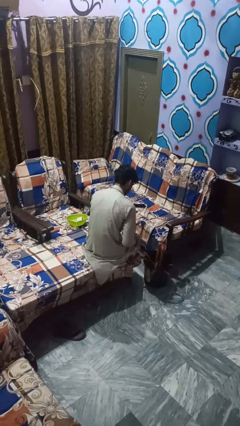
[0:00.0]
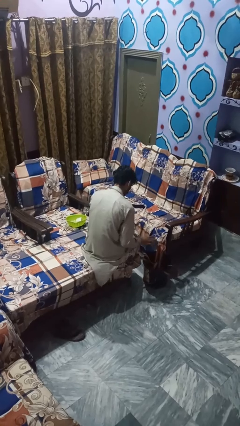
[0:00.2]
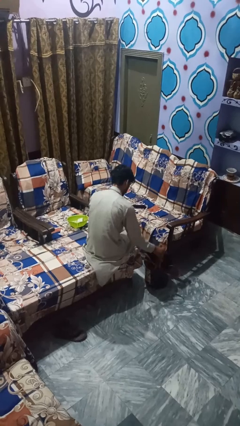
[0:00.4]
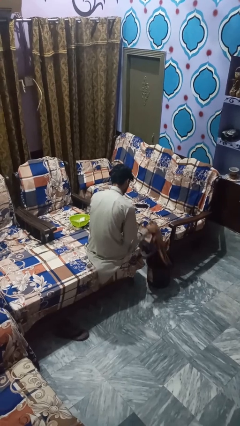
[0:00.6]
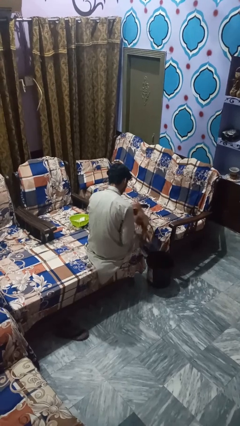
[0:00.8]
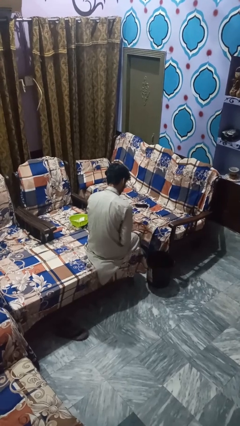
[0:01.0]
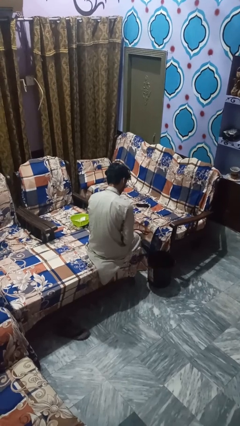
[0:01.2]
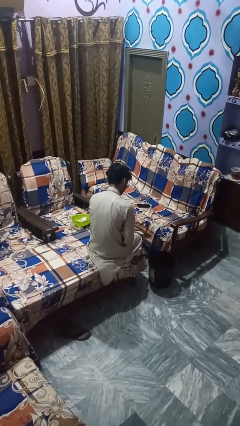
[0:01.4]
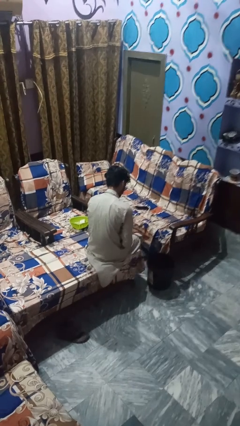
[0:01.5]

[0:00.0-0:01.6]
person takes object from basket

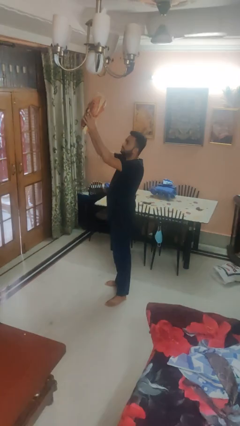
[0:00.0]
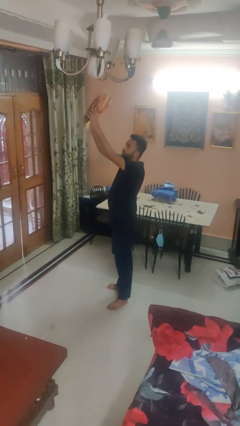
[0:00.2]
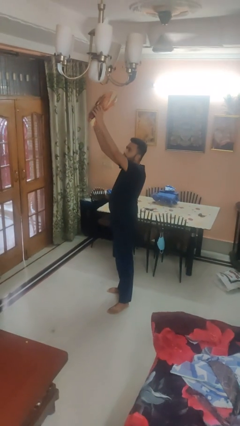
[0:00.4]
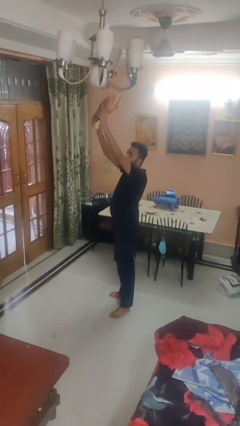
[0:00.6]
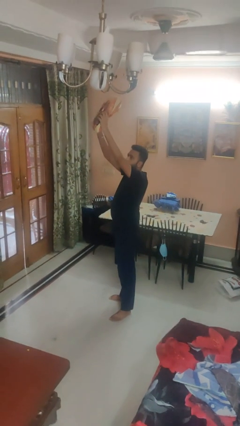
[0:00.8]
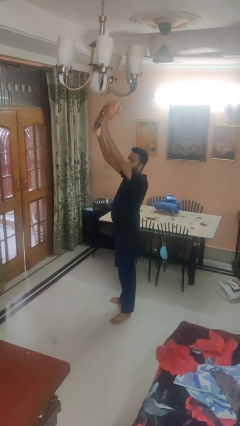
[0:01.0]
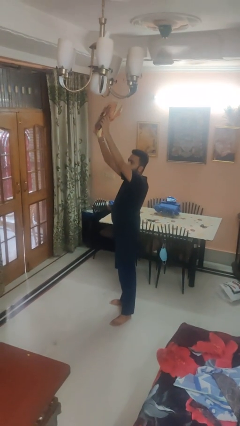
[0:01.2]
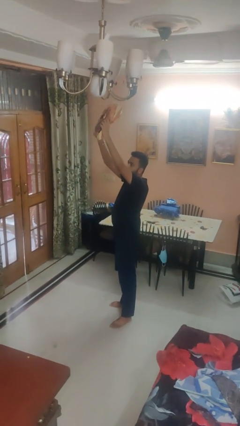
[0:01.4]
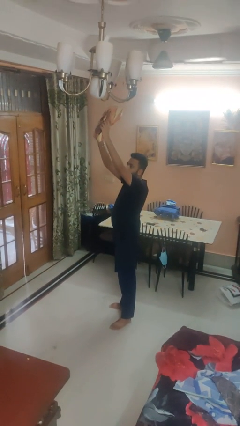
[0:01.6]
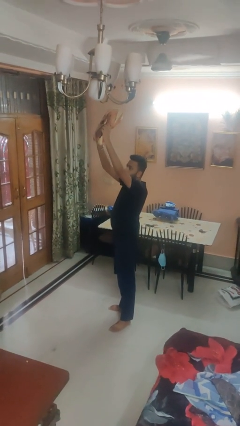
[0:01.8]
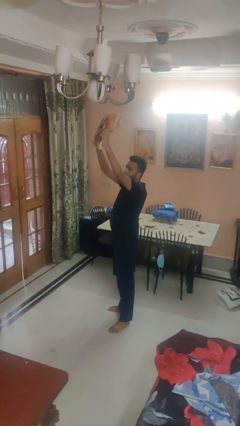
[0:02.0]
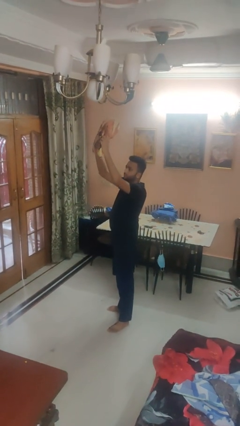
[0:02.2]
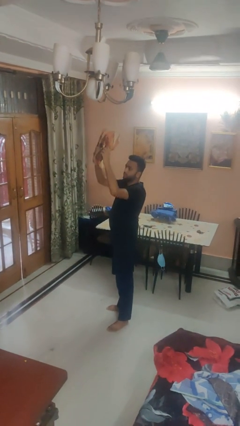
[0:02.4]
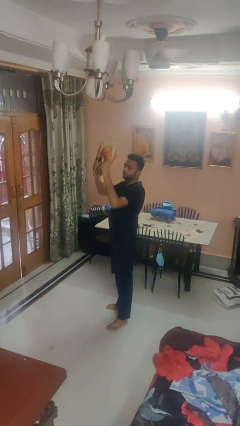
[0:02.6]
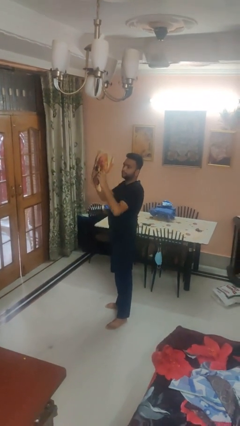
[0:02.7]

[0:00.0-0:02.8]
person holds object above head

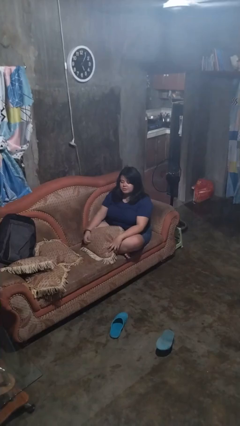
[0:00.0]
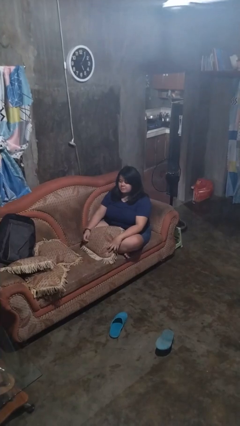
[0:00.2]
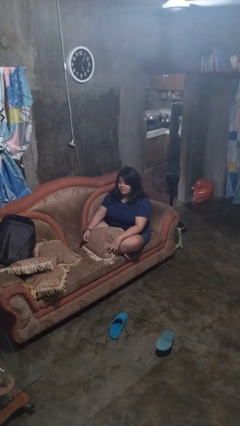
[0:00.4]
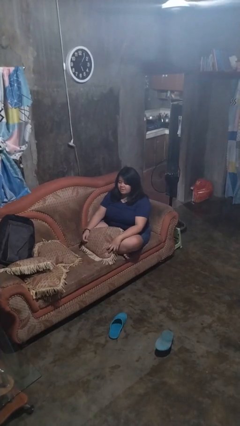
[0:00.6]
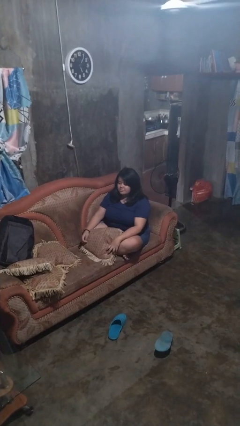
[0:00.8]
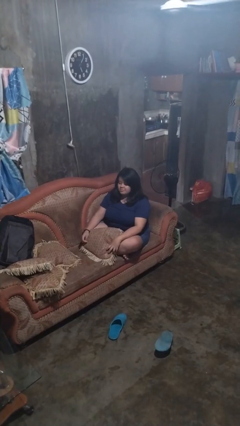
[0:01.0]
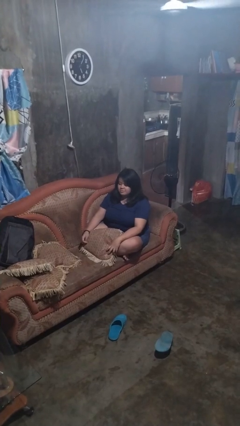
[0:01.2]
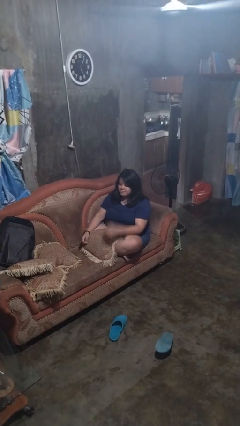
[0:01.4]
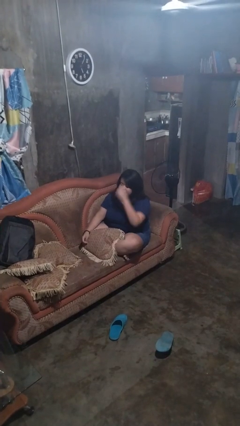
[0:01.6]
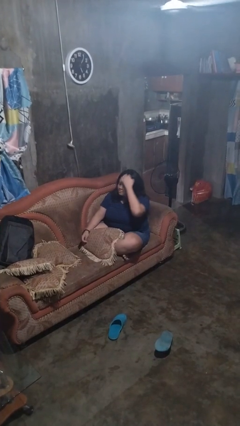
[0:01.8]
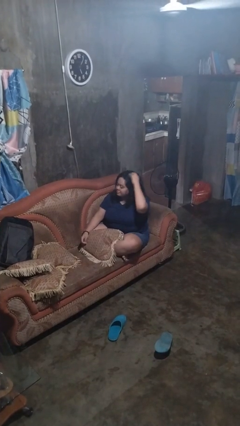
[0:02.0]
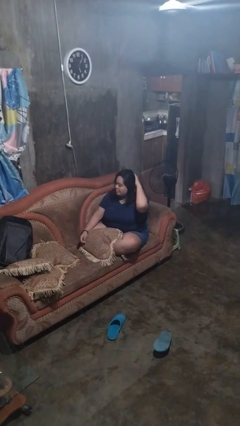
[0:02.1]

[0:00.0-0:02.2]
person strokes hair

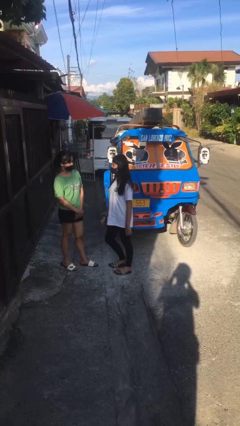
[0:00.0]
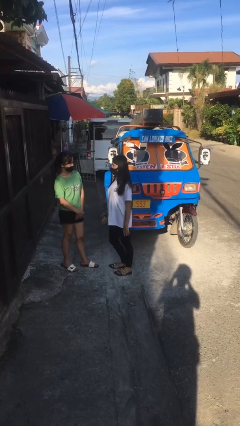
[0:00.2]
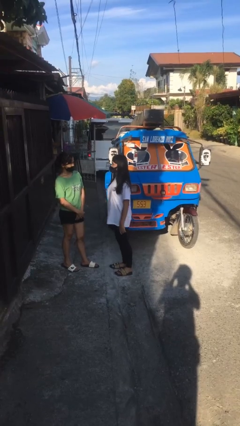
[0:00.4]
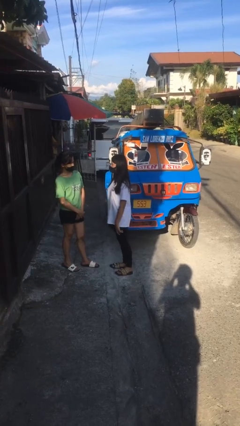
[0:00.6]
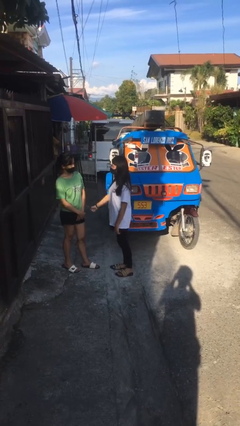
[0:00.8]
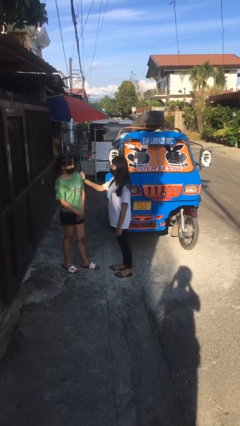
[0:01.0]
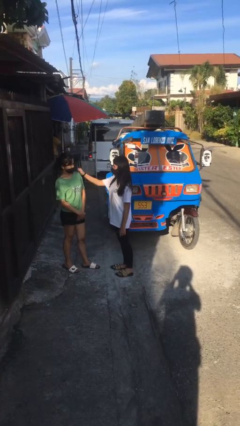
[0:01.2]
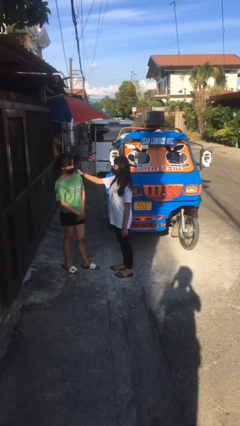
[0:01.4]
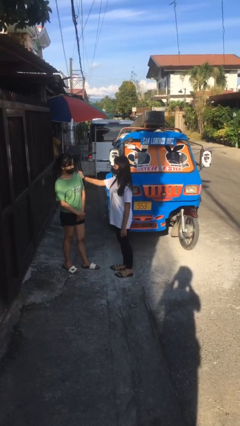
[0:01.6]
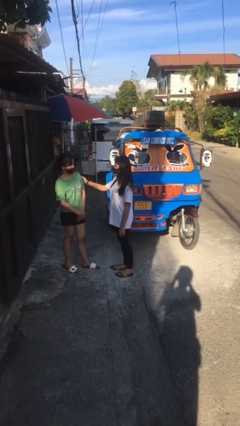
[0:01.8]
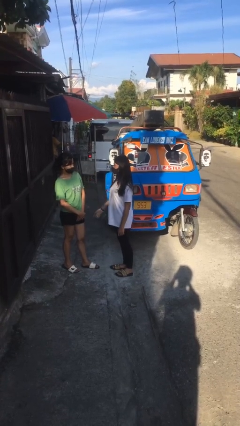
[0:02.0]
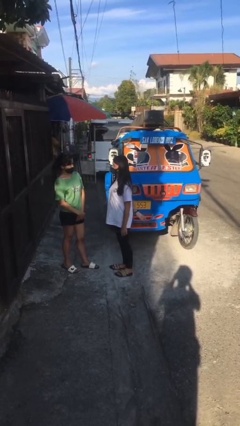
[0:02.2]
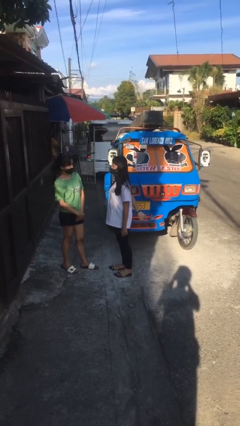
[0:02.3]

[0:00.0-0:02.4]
person pounds shoulders of person

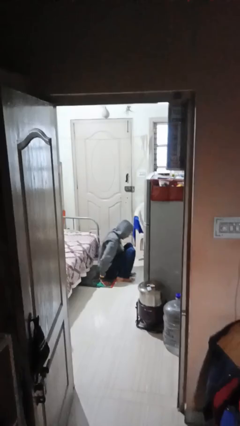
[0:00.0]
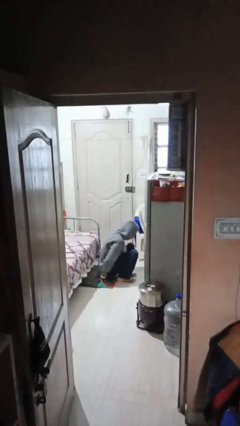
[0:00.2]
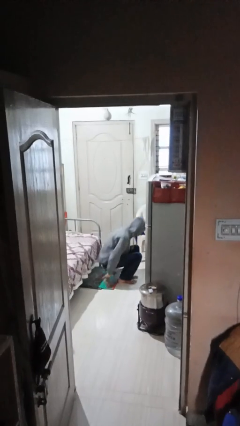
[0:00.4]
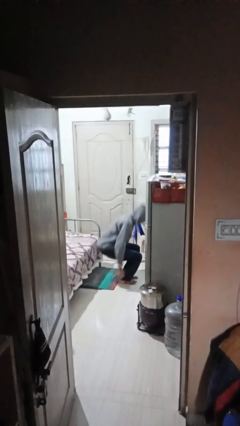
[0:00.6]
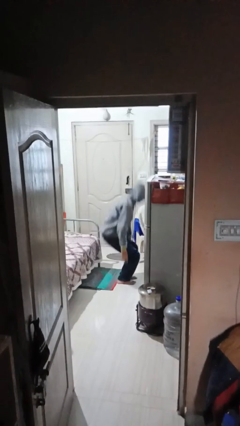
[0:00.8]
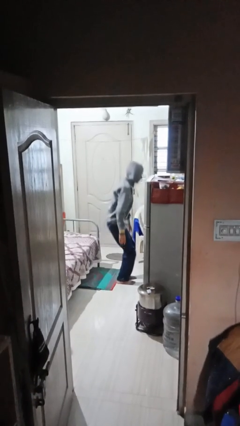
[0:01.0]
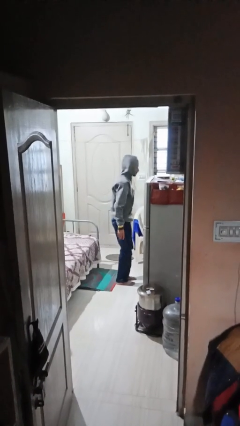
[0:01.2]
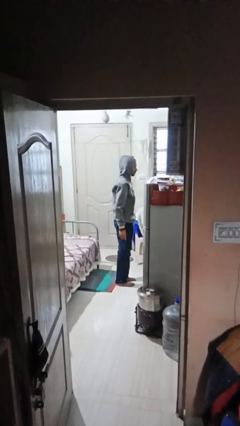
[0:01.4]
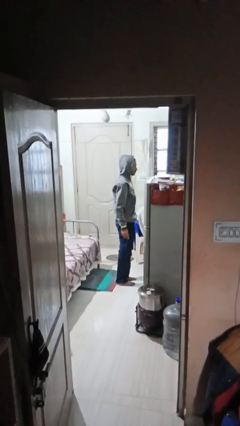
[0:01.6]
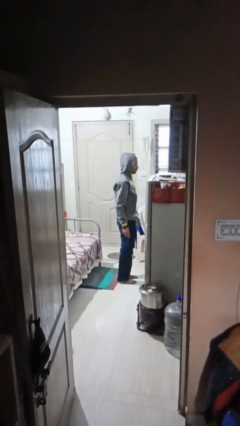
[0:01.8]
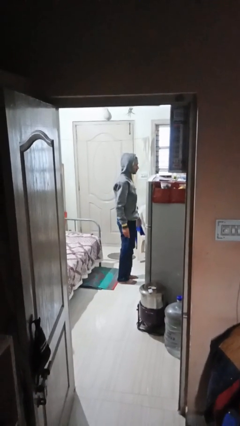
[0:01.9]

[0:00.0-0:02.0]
person stands up

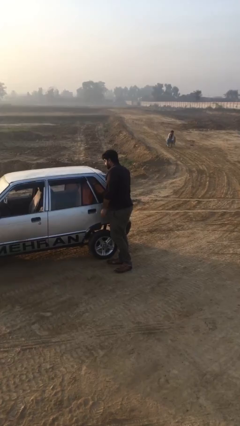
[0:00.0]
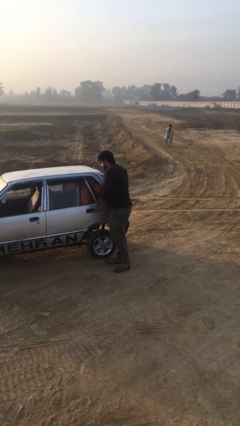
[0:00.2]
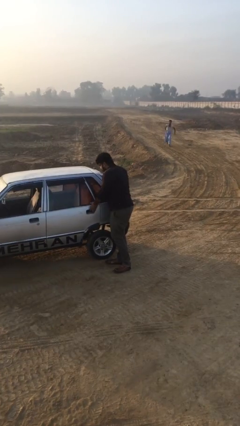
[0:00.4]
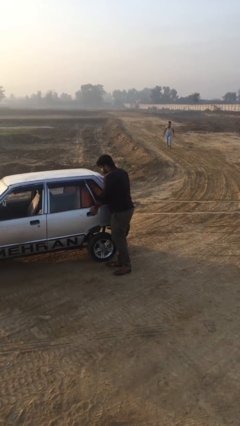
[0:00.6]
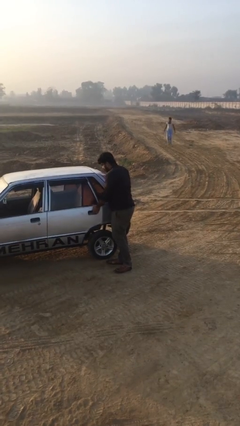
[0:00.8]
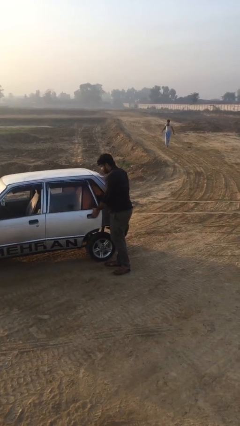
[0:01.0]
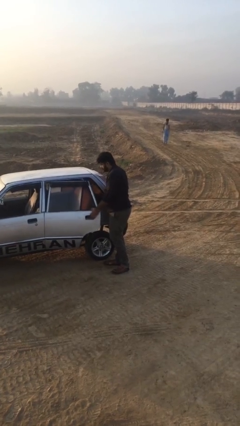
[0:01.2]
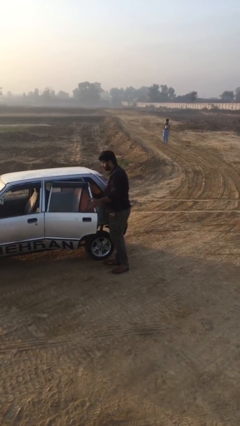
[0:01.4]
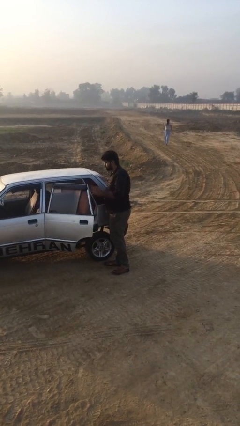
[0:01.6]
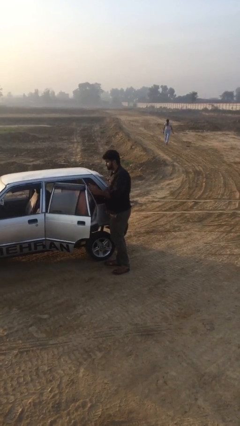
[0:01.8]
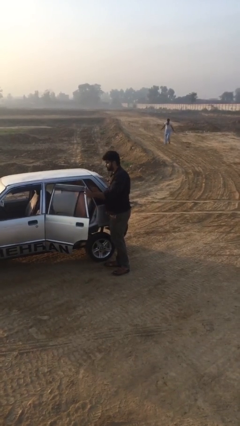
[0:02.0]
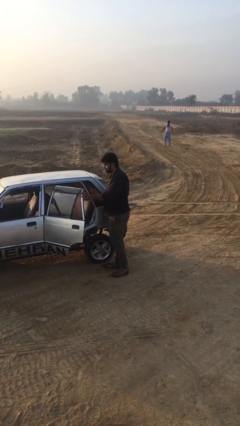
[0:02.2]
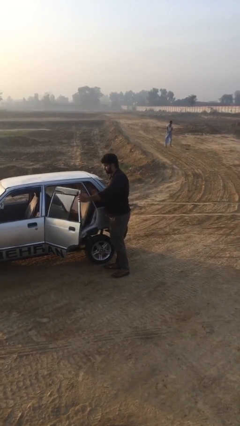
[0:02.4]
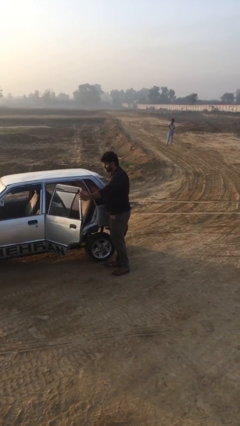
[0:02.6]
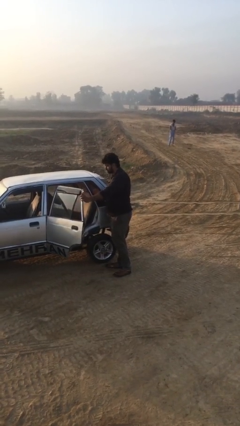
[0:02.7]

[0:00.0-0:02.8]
person opens car door

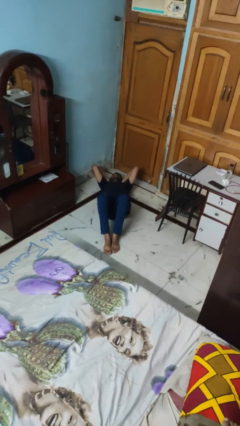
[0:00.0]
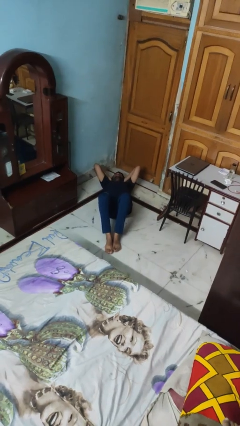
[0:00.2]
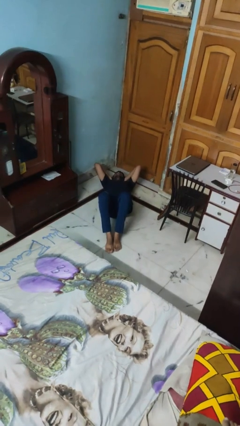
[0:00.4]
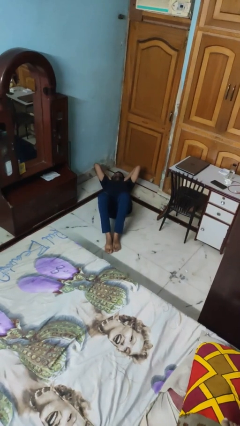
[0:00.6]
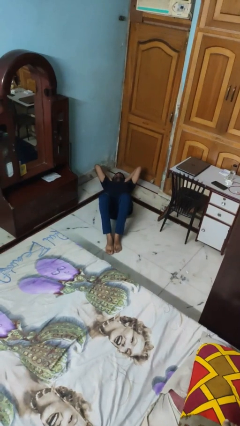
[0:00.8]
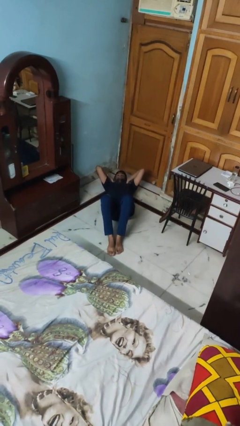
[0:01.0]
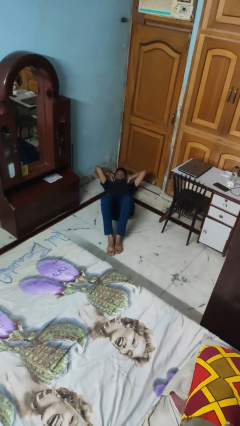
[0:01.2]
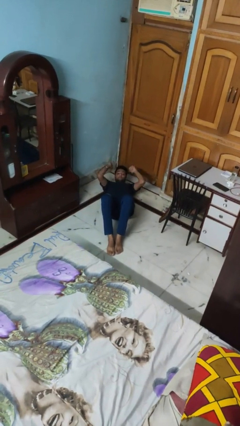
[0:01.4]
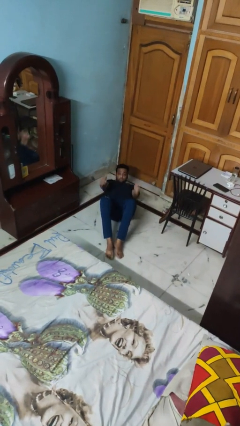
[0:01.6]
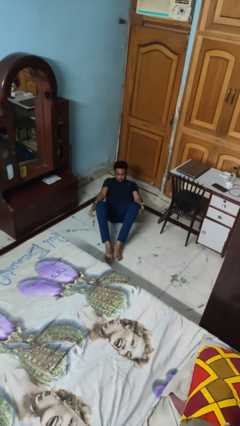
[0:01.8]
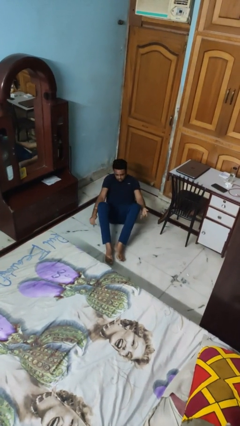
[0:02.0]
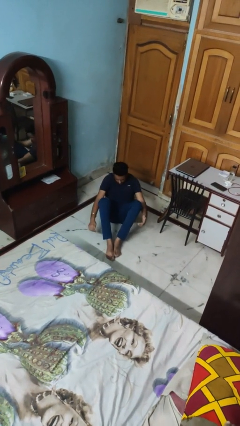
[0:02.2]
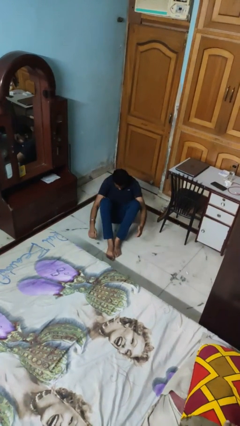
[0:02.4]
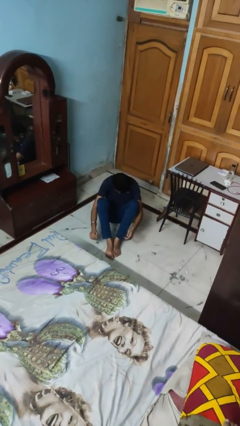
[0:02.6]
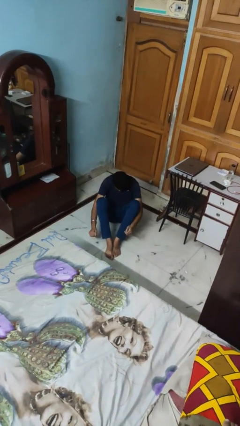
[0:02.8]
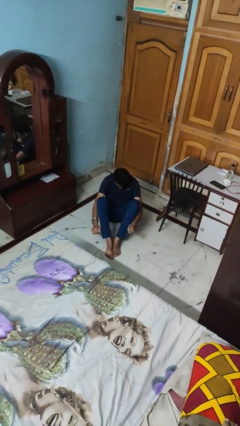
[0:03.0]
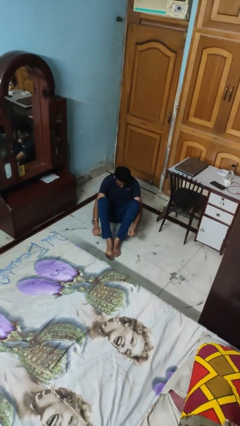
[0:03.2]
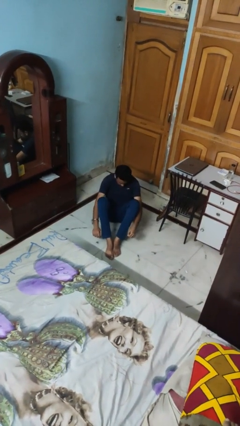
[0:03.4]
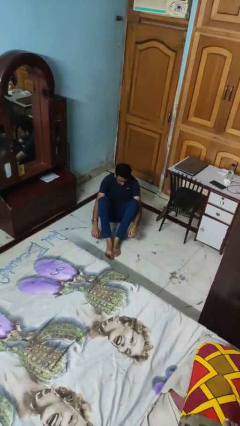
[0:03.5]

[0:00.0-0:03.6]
person exercises with situp
